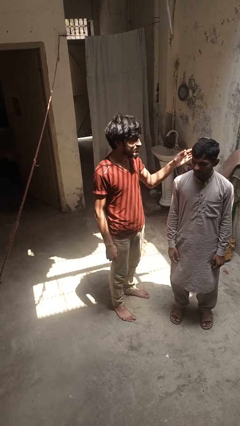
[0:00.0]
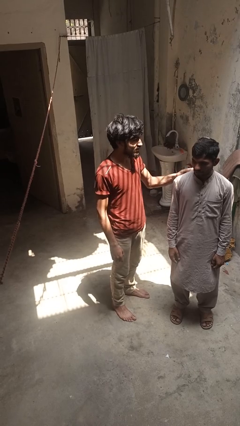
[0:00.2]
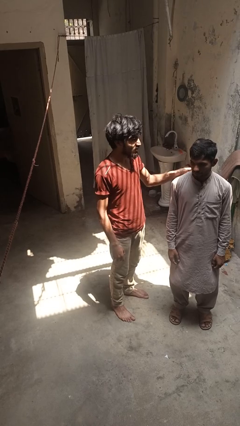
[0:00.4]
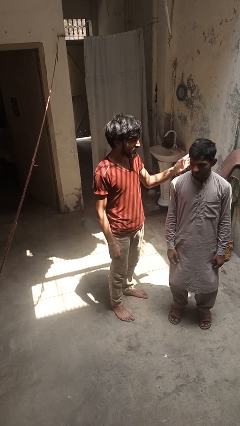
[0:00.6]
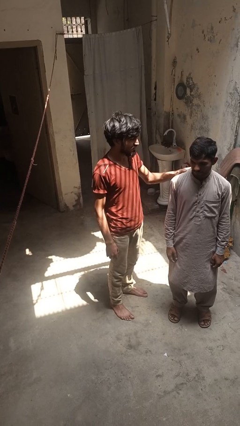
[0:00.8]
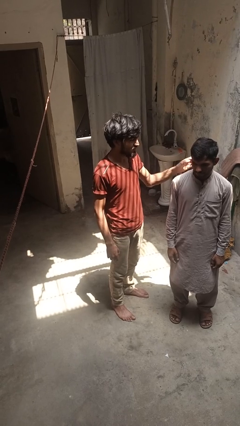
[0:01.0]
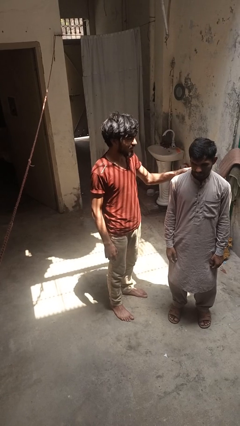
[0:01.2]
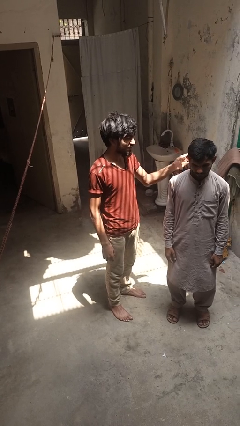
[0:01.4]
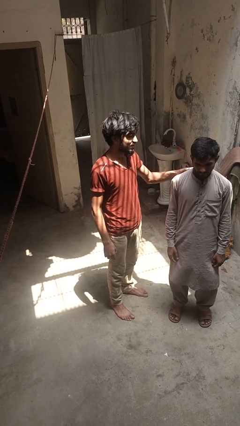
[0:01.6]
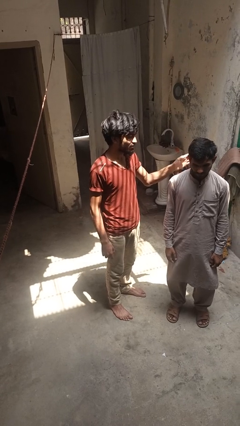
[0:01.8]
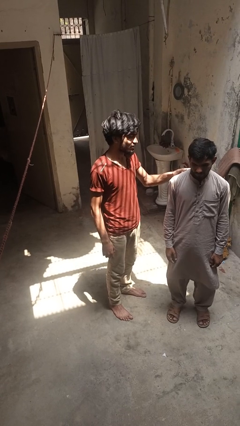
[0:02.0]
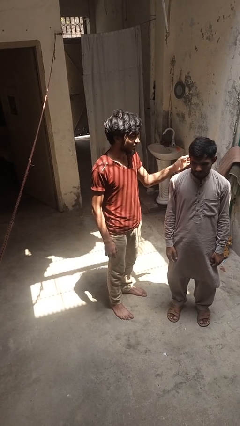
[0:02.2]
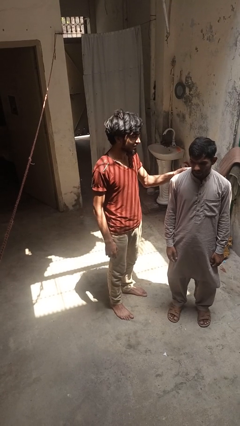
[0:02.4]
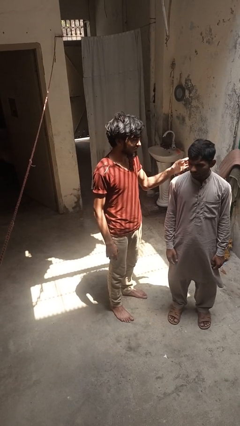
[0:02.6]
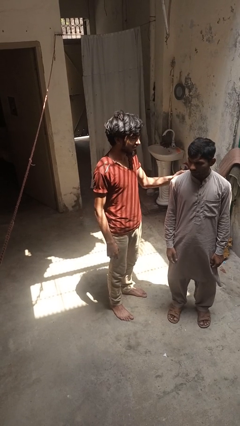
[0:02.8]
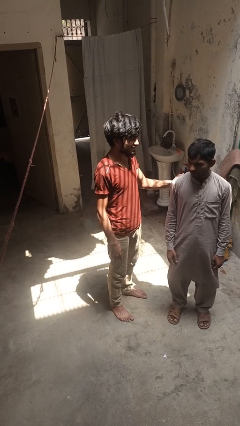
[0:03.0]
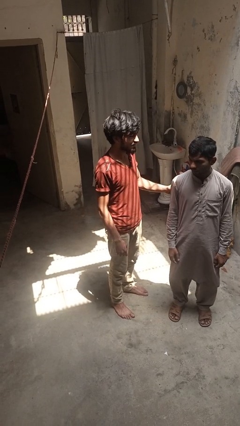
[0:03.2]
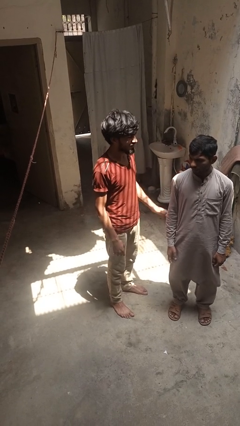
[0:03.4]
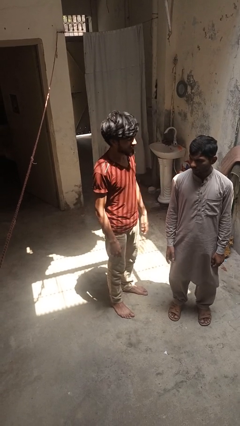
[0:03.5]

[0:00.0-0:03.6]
person pounds shoulders of person

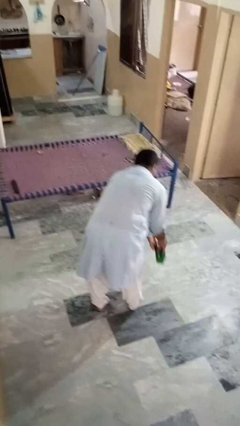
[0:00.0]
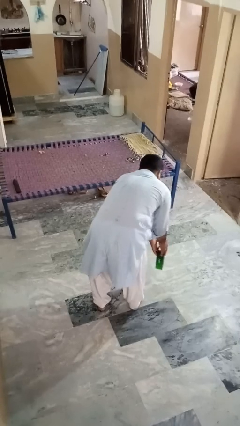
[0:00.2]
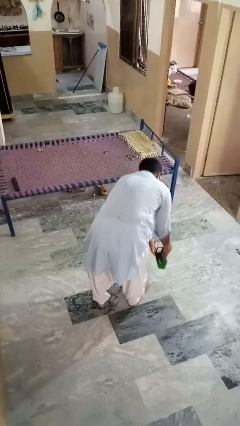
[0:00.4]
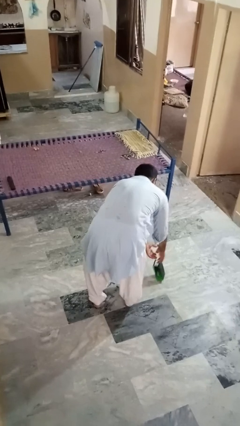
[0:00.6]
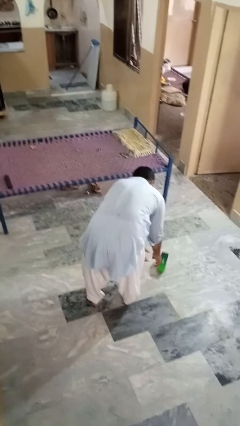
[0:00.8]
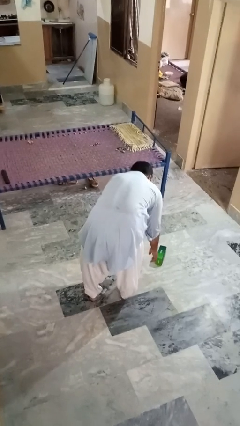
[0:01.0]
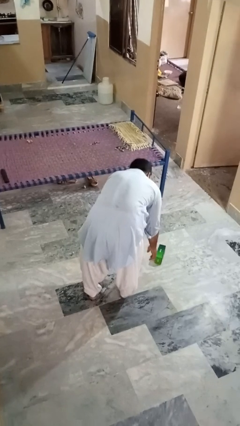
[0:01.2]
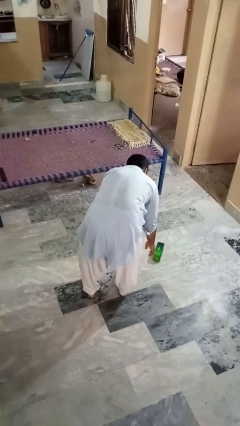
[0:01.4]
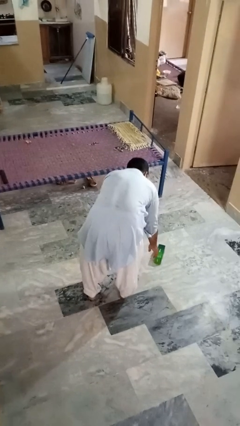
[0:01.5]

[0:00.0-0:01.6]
person catches dropped object

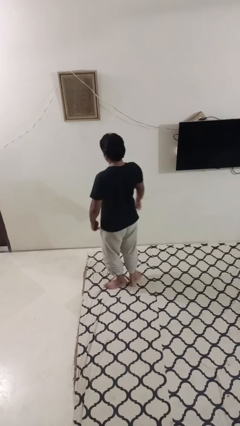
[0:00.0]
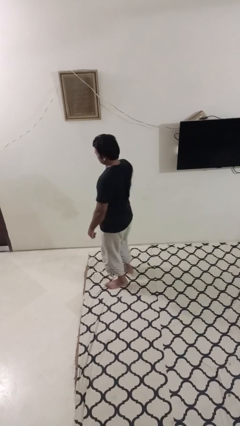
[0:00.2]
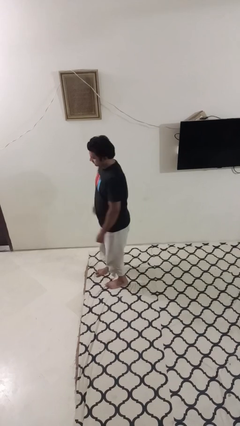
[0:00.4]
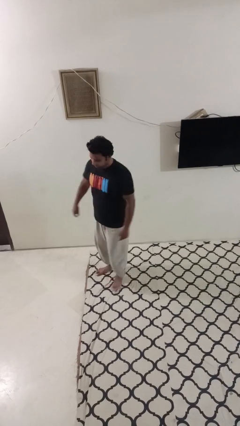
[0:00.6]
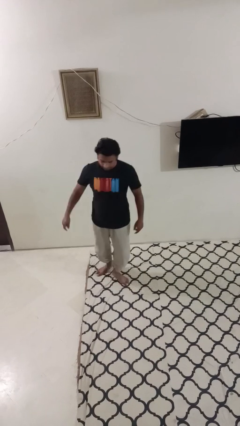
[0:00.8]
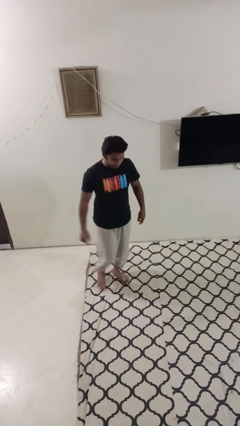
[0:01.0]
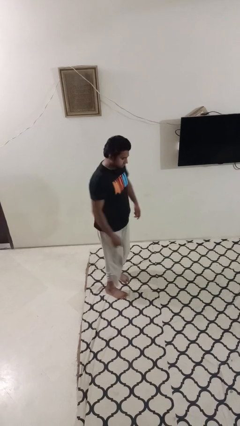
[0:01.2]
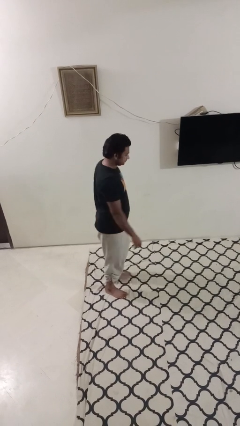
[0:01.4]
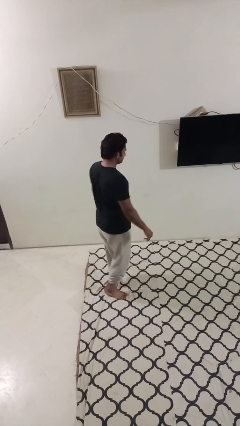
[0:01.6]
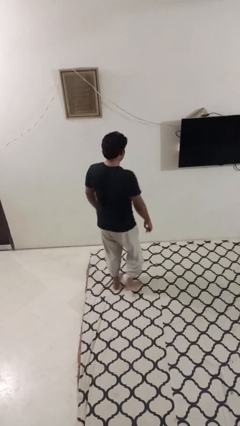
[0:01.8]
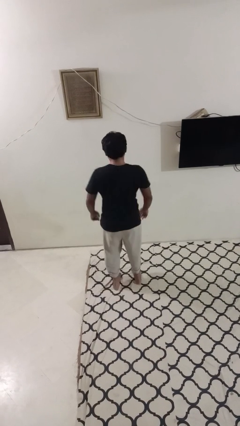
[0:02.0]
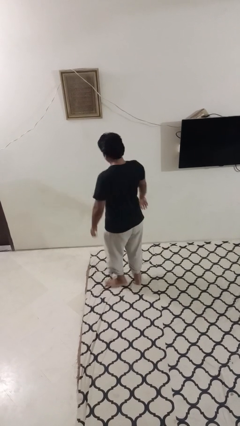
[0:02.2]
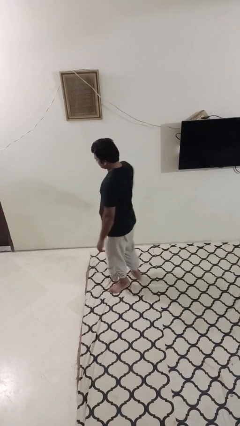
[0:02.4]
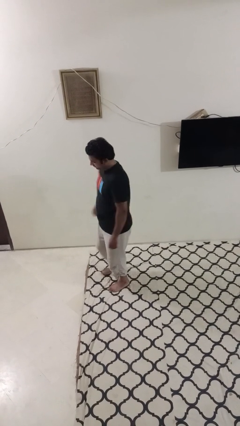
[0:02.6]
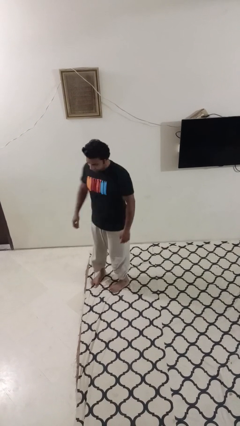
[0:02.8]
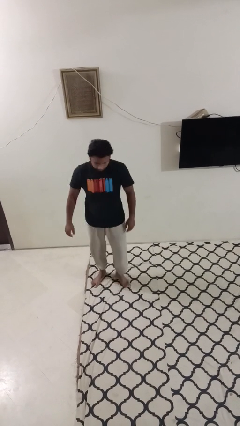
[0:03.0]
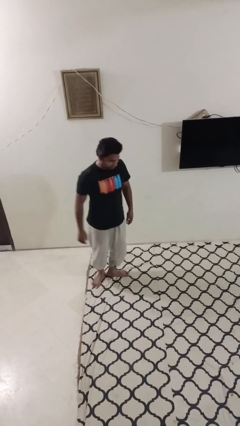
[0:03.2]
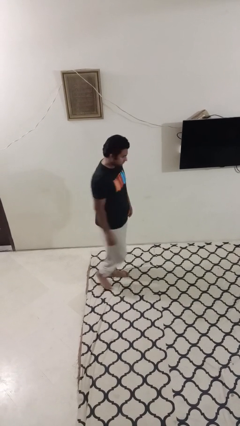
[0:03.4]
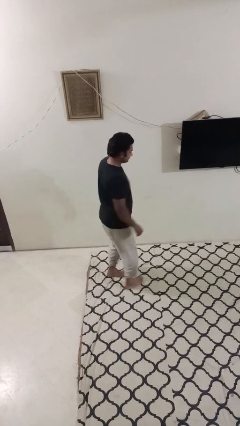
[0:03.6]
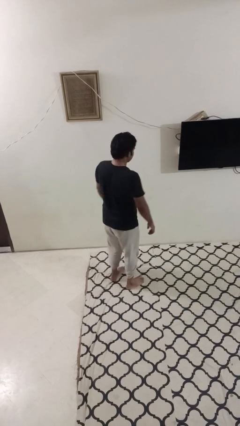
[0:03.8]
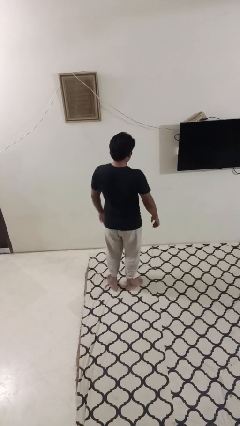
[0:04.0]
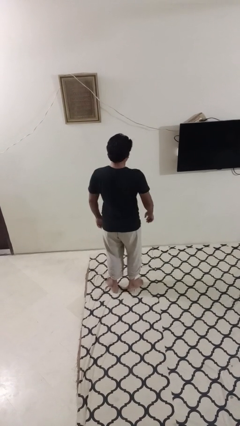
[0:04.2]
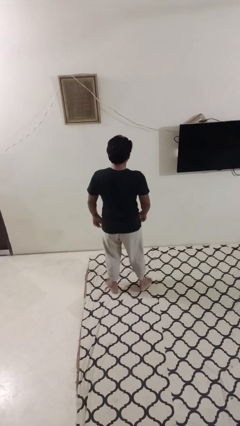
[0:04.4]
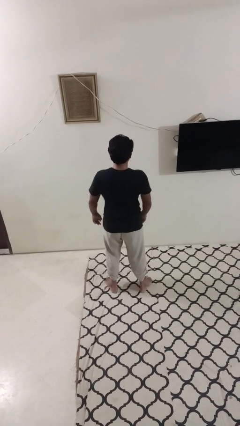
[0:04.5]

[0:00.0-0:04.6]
person twirls

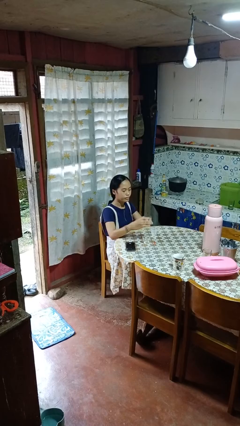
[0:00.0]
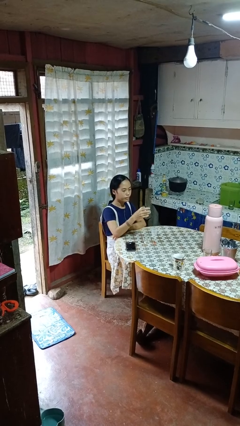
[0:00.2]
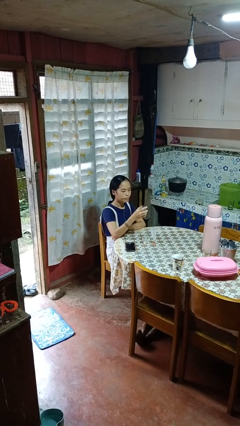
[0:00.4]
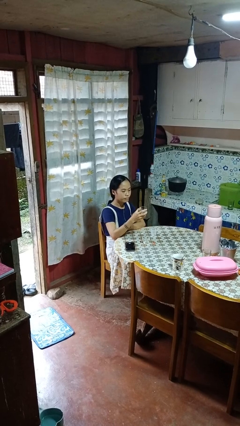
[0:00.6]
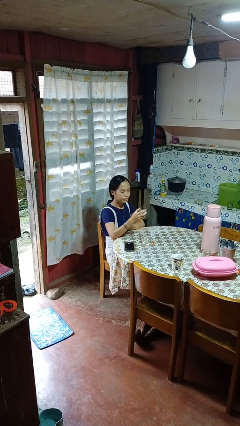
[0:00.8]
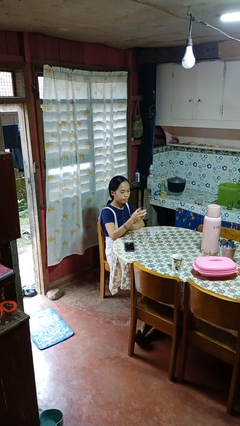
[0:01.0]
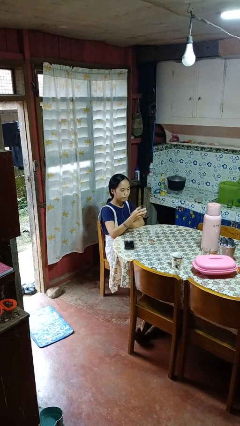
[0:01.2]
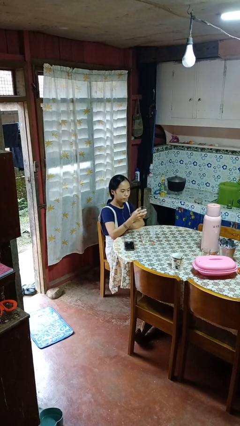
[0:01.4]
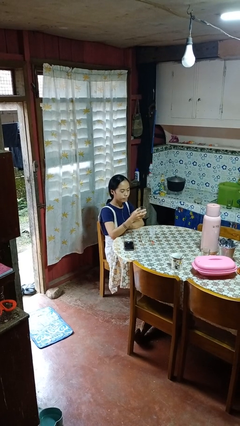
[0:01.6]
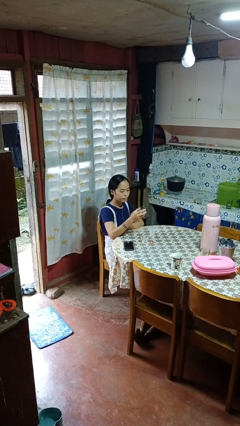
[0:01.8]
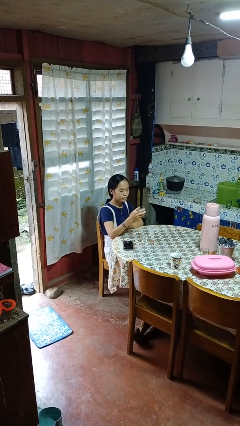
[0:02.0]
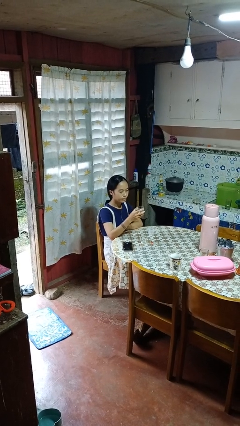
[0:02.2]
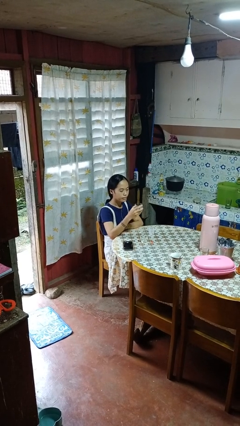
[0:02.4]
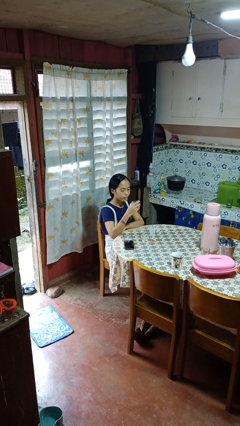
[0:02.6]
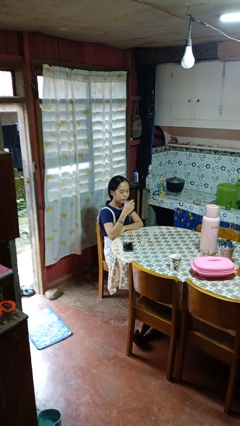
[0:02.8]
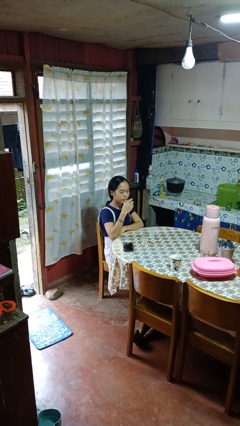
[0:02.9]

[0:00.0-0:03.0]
person picks up object from table

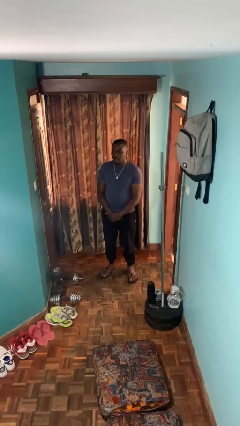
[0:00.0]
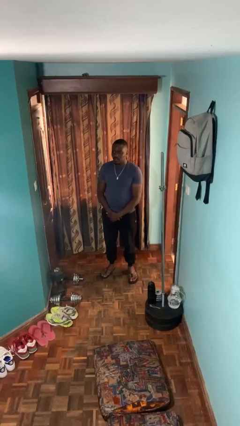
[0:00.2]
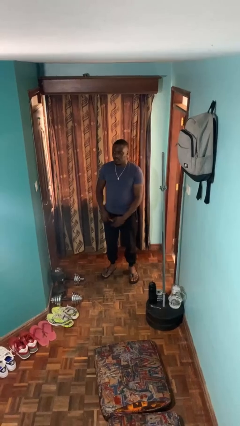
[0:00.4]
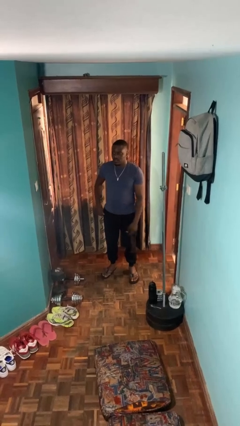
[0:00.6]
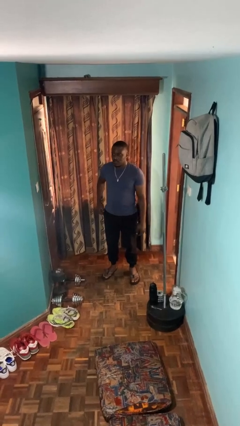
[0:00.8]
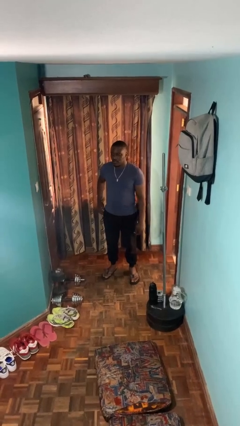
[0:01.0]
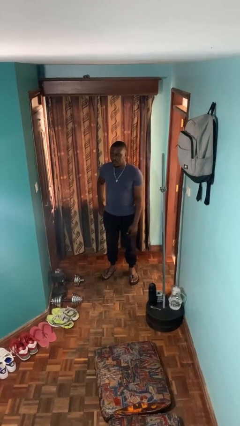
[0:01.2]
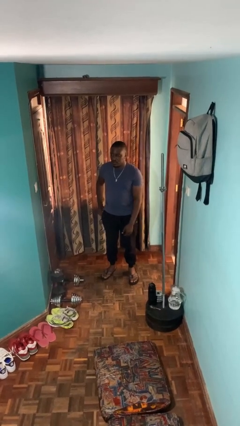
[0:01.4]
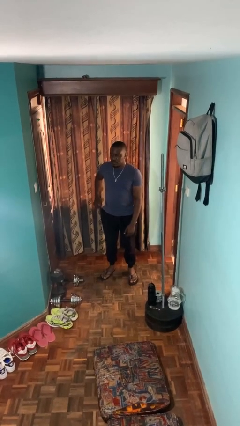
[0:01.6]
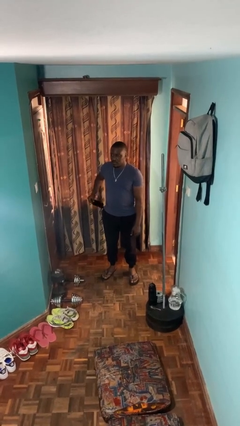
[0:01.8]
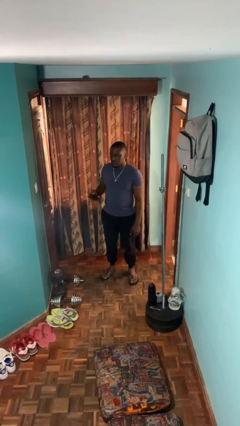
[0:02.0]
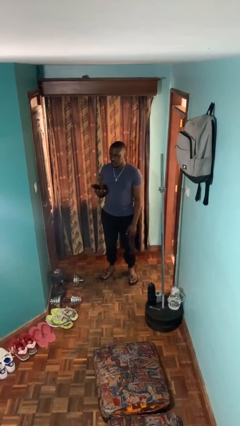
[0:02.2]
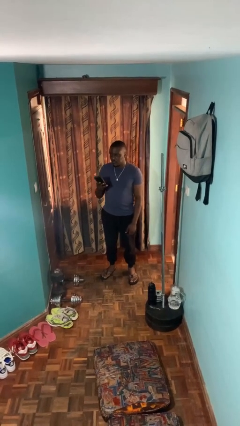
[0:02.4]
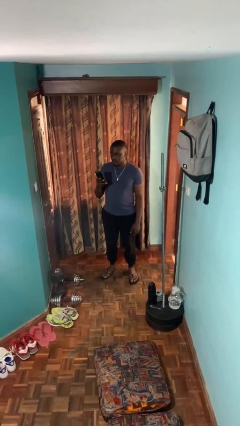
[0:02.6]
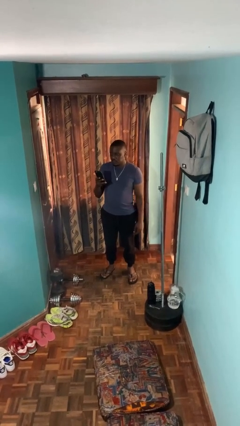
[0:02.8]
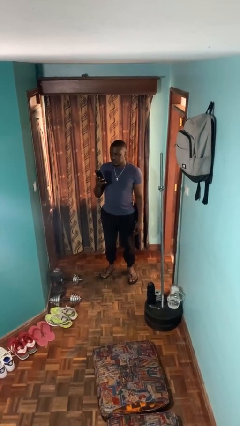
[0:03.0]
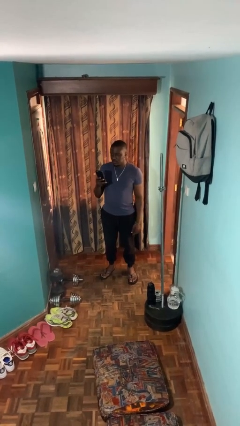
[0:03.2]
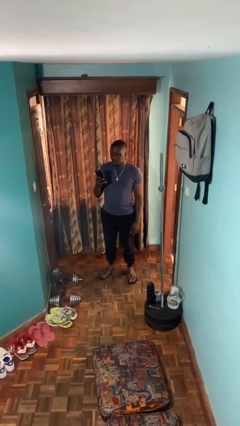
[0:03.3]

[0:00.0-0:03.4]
person takes phone from pocket

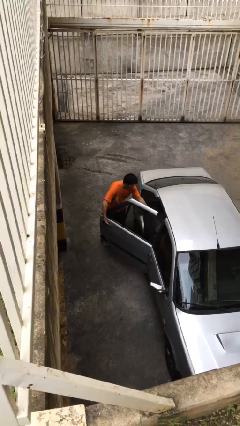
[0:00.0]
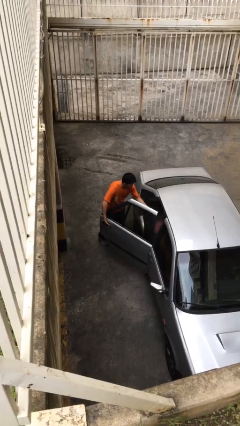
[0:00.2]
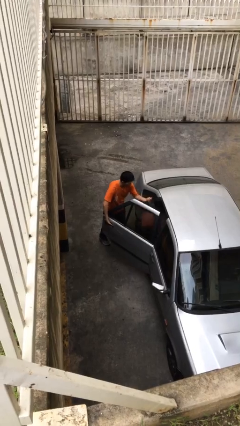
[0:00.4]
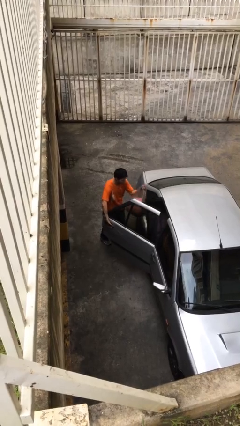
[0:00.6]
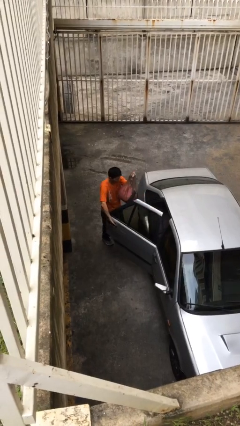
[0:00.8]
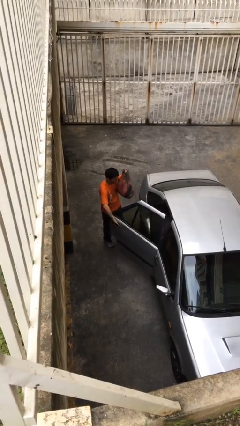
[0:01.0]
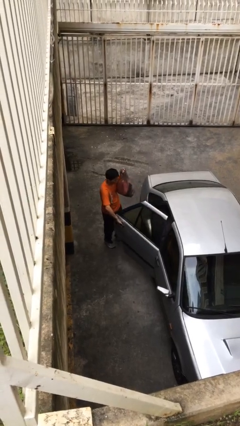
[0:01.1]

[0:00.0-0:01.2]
person unloads car
